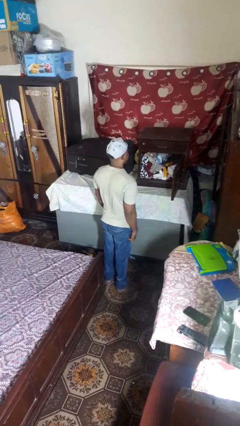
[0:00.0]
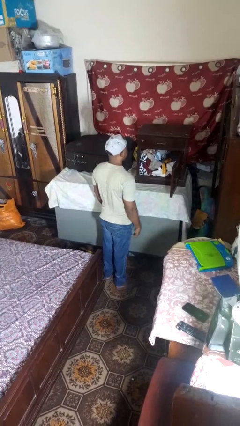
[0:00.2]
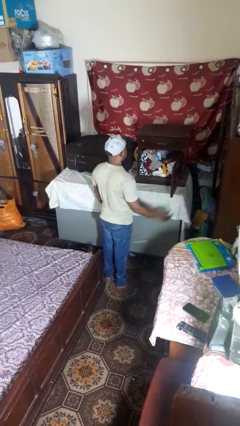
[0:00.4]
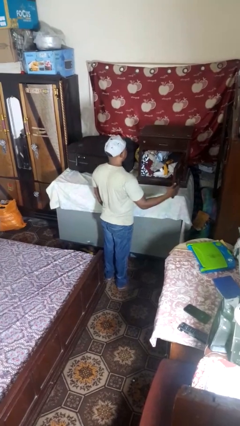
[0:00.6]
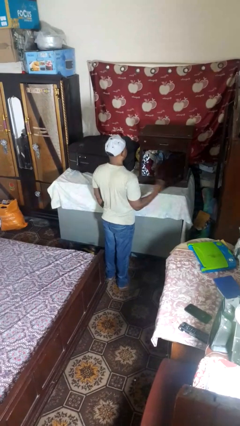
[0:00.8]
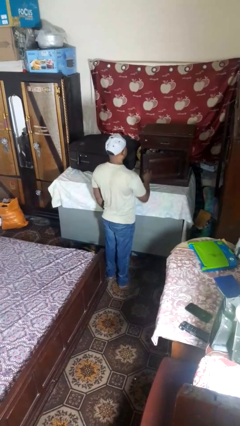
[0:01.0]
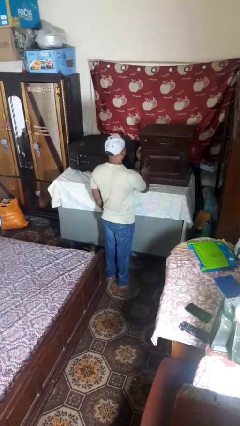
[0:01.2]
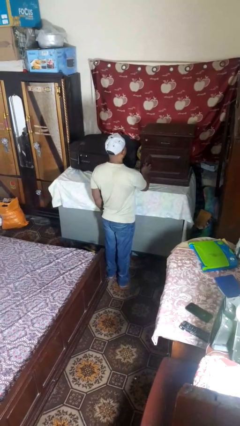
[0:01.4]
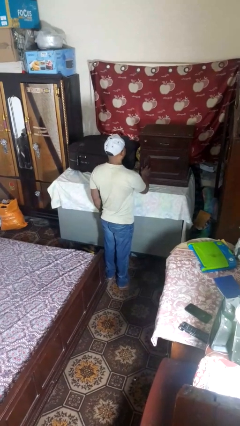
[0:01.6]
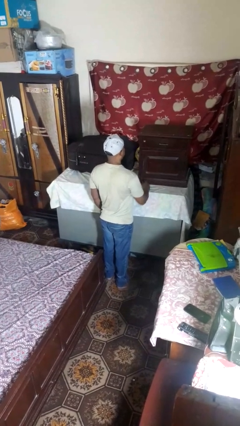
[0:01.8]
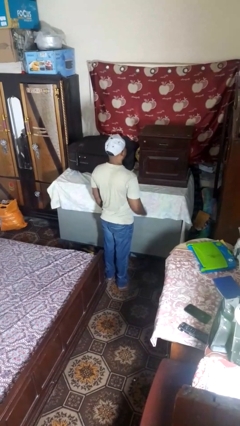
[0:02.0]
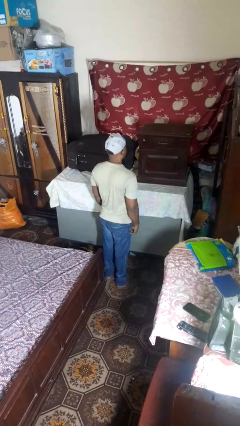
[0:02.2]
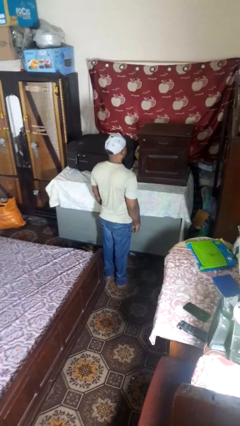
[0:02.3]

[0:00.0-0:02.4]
person closes closet door

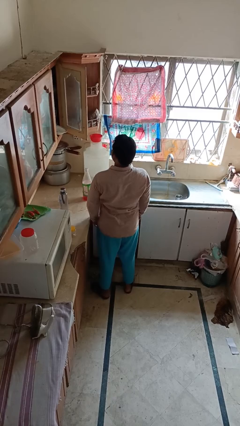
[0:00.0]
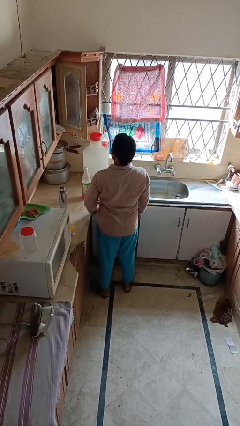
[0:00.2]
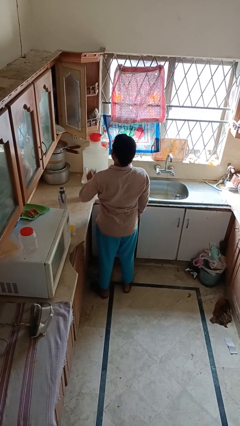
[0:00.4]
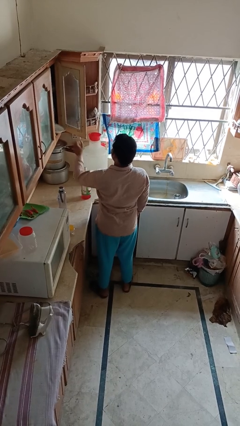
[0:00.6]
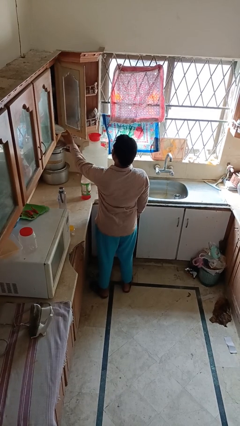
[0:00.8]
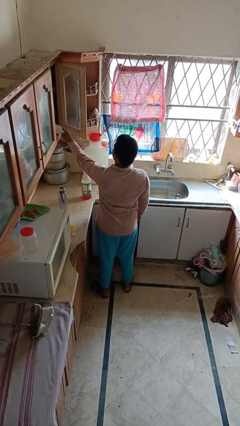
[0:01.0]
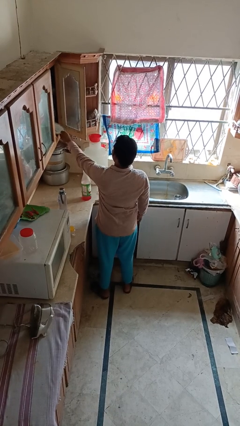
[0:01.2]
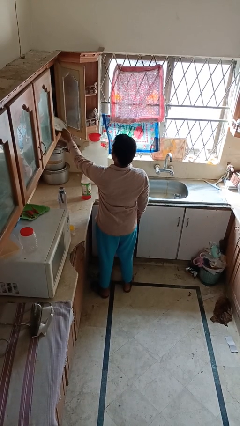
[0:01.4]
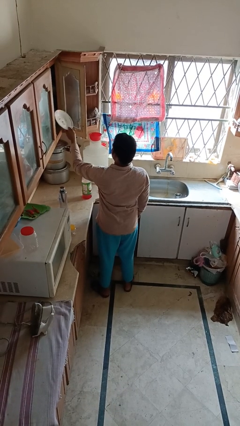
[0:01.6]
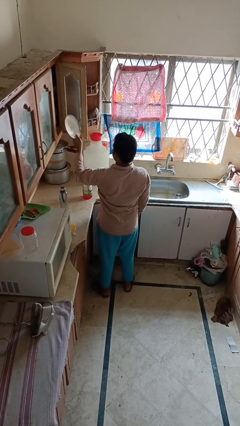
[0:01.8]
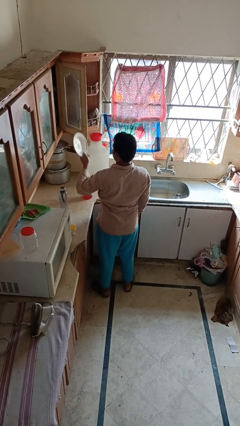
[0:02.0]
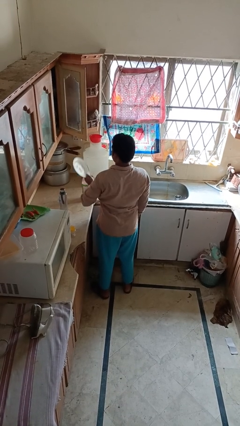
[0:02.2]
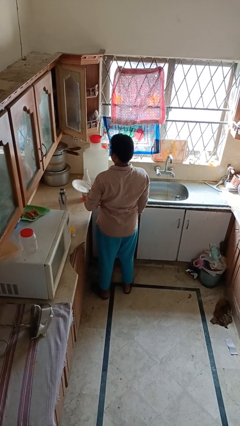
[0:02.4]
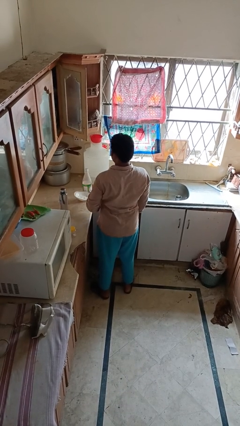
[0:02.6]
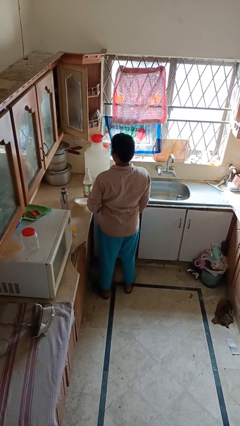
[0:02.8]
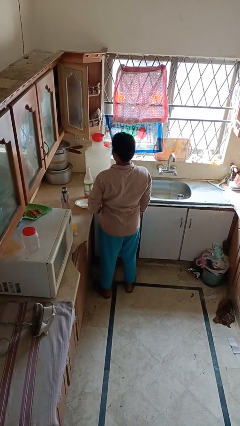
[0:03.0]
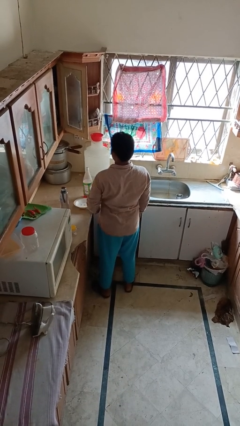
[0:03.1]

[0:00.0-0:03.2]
person takes object from cabinet

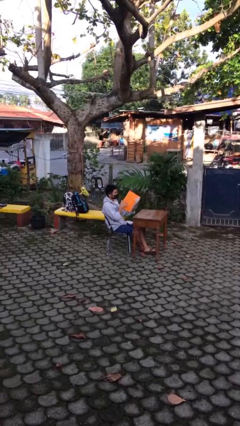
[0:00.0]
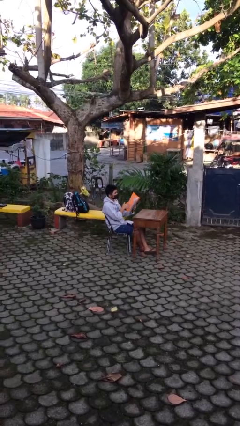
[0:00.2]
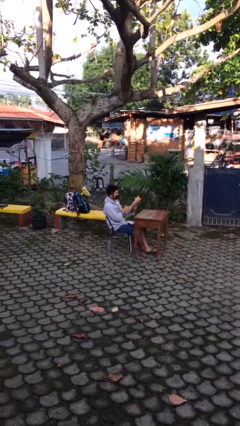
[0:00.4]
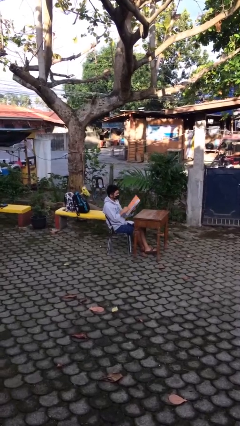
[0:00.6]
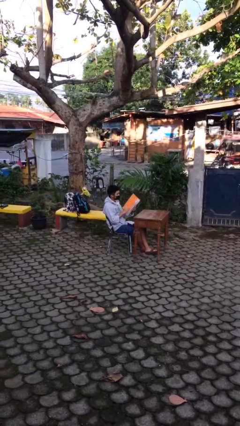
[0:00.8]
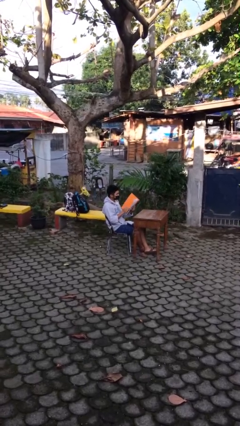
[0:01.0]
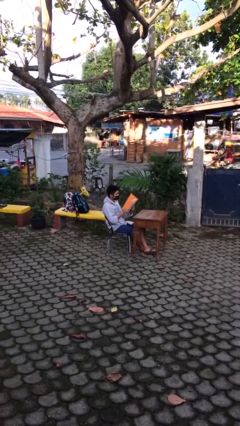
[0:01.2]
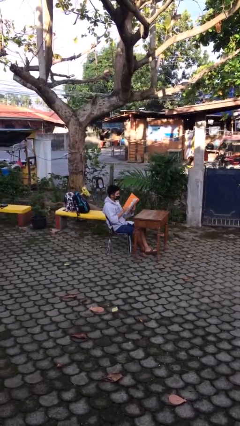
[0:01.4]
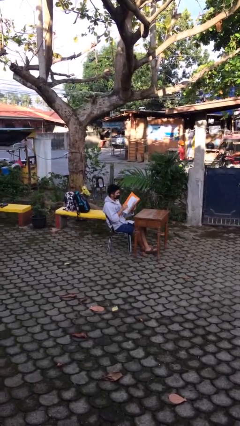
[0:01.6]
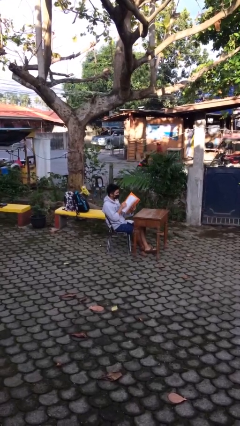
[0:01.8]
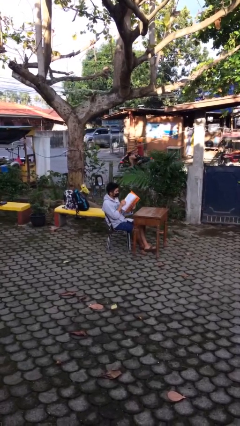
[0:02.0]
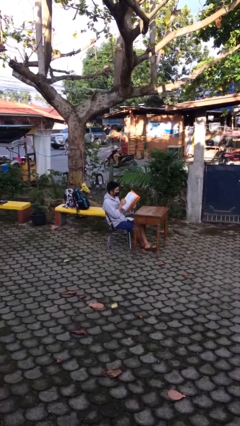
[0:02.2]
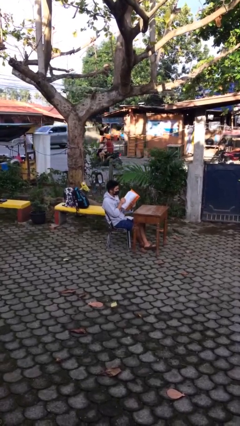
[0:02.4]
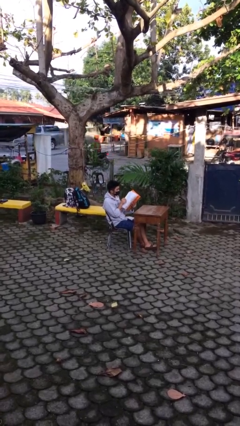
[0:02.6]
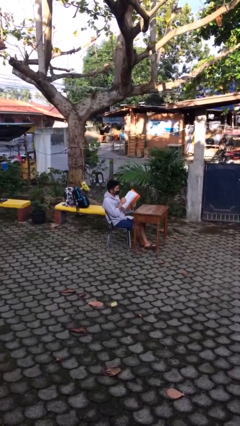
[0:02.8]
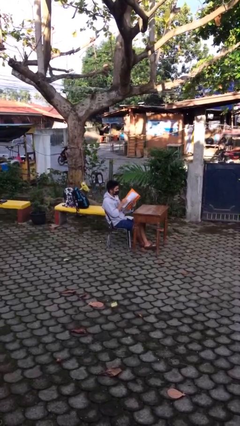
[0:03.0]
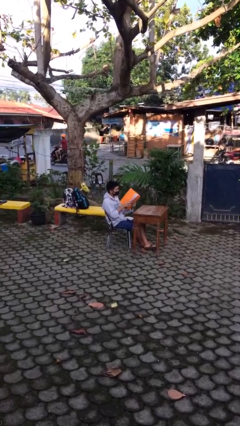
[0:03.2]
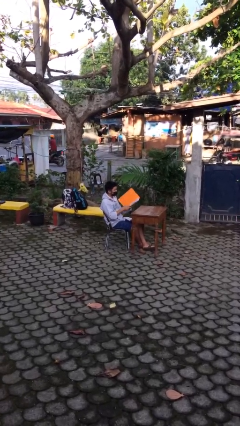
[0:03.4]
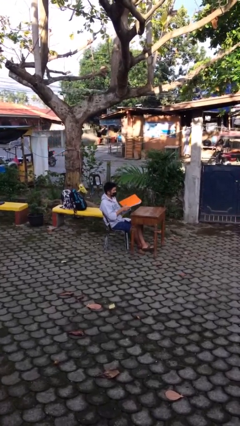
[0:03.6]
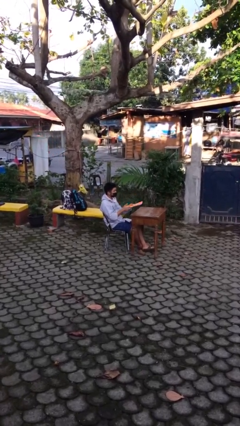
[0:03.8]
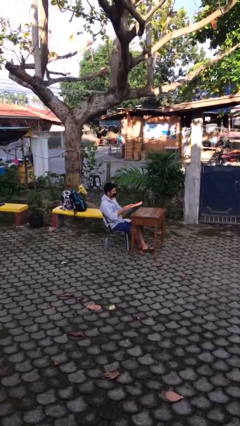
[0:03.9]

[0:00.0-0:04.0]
person reads document

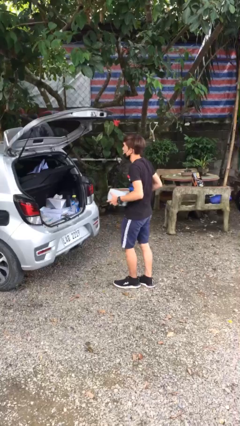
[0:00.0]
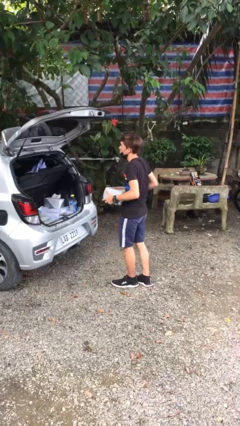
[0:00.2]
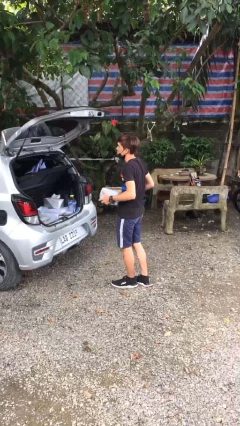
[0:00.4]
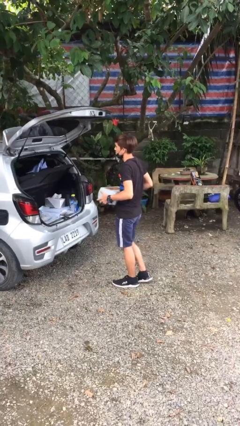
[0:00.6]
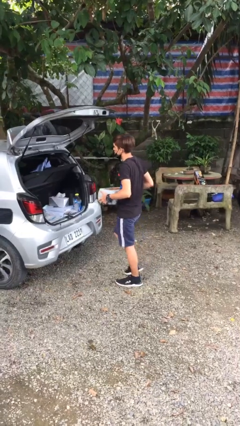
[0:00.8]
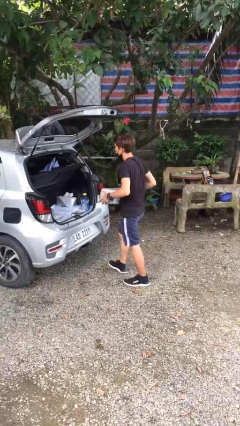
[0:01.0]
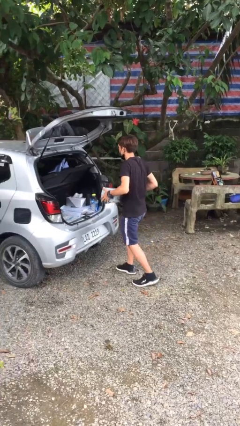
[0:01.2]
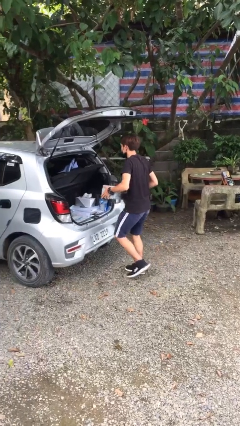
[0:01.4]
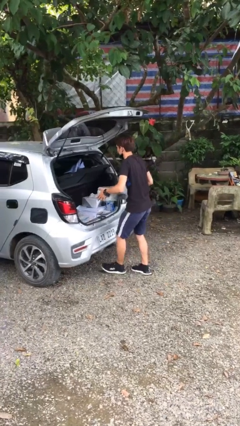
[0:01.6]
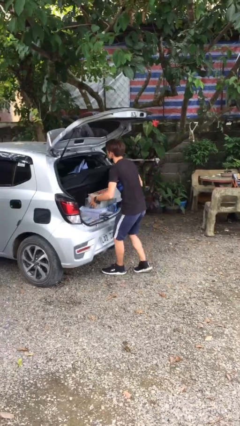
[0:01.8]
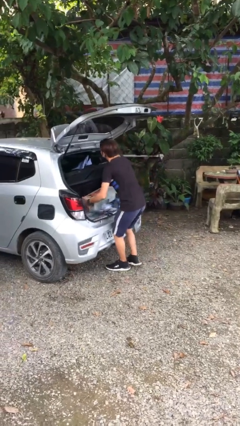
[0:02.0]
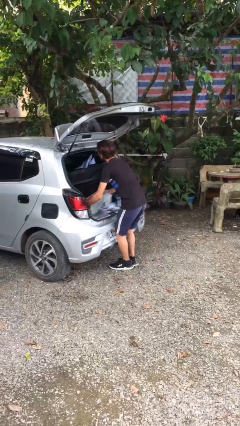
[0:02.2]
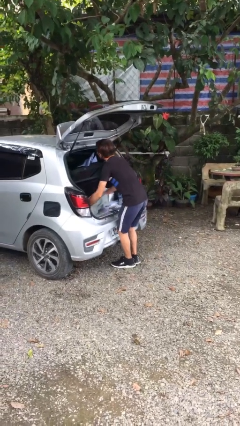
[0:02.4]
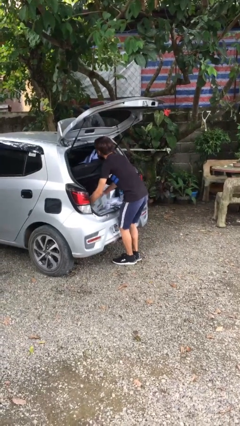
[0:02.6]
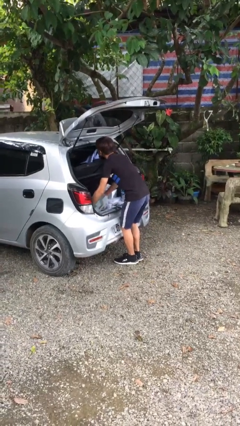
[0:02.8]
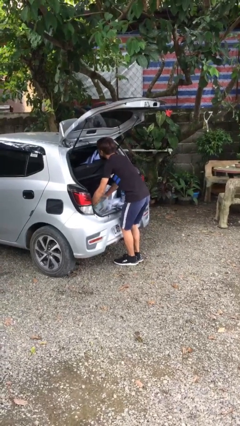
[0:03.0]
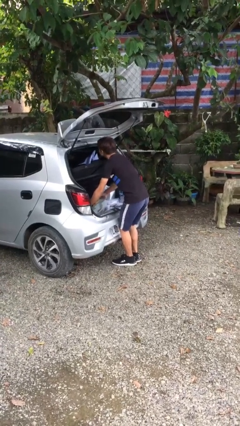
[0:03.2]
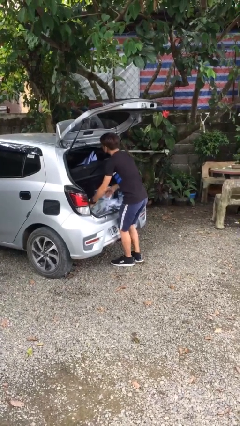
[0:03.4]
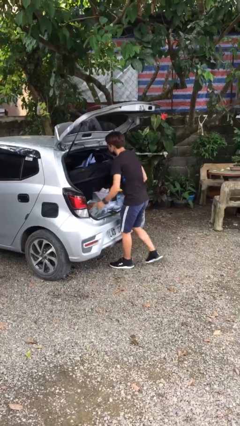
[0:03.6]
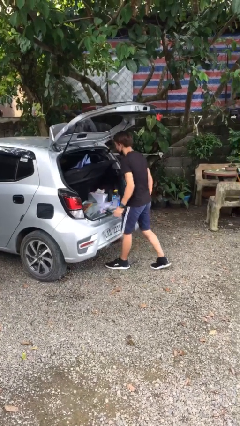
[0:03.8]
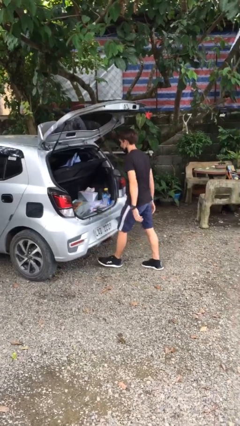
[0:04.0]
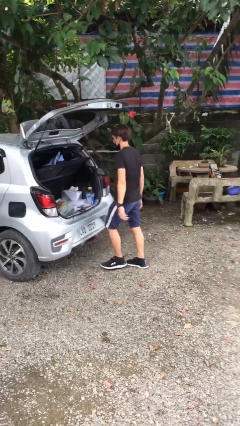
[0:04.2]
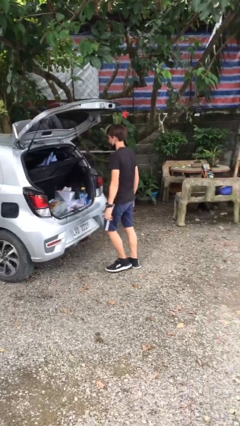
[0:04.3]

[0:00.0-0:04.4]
person loads car

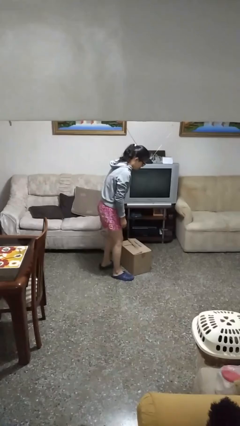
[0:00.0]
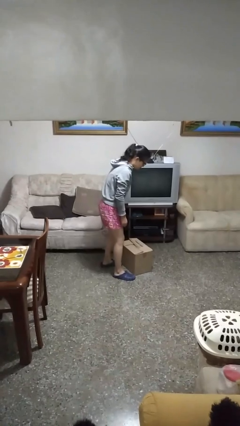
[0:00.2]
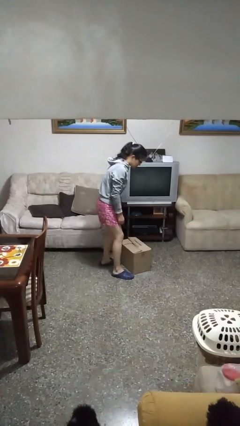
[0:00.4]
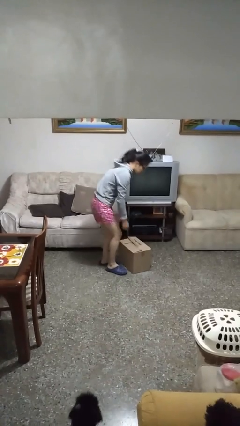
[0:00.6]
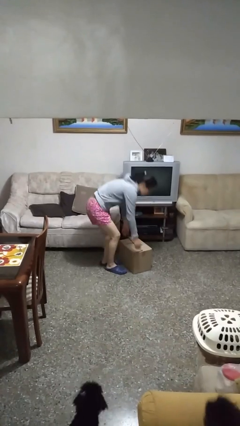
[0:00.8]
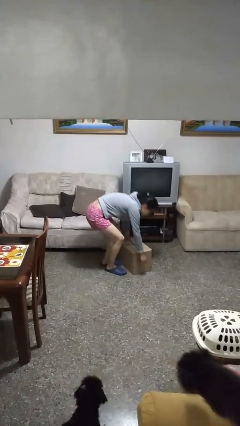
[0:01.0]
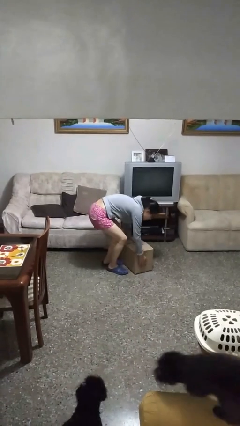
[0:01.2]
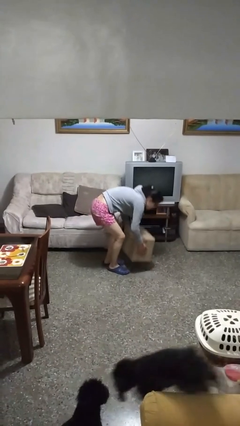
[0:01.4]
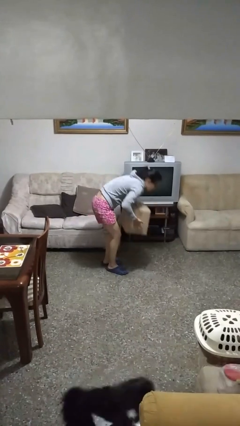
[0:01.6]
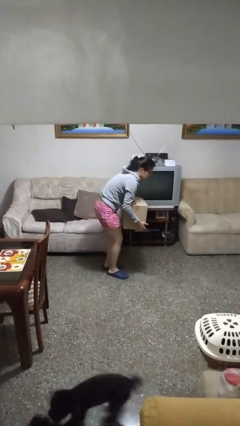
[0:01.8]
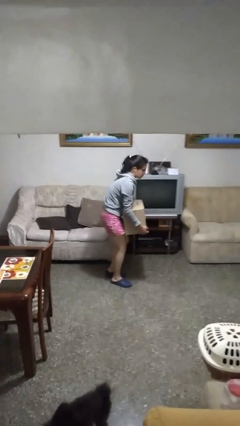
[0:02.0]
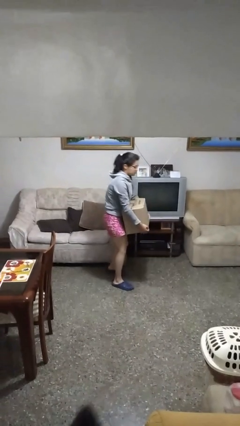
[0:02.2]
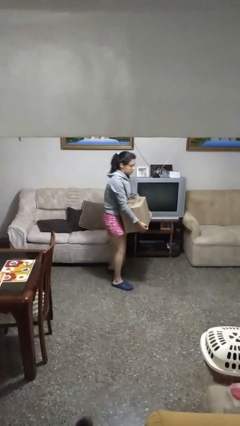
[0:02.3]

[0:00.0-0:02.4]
person picks up object from floor

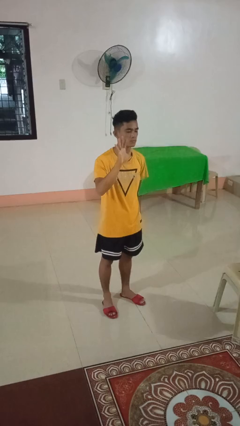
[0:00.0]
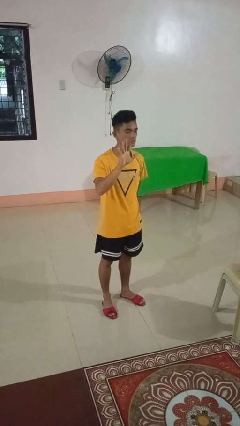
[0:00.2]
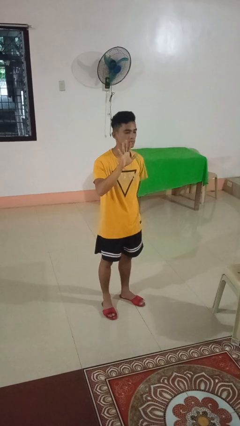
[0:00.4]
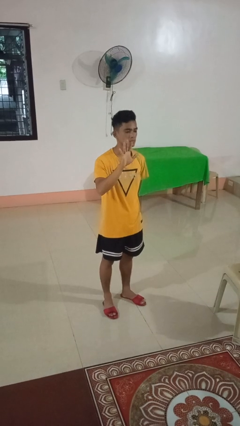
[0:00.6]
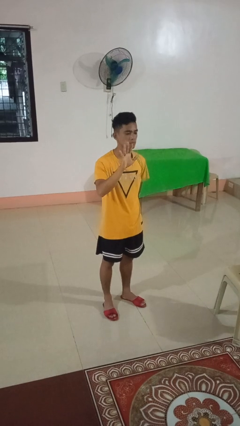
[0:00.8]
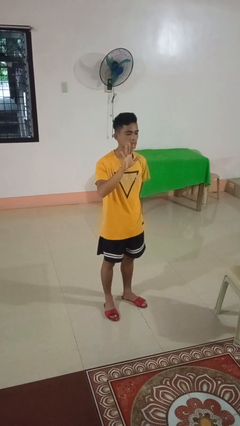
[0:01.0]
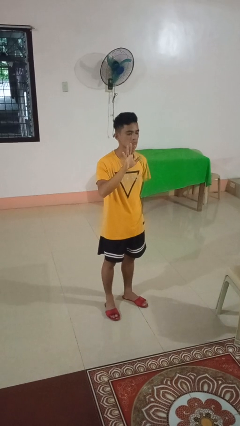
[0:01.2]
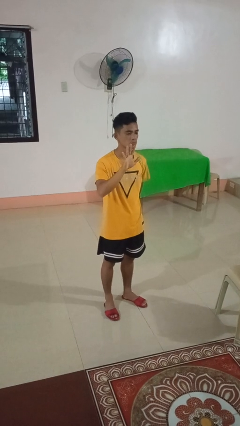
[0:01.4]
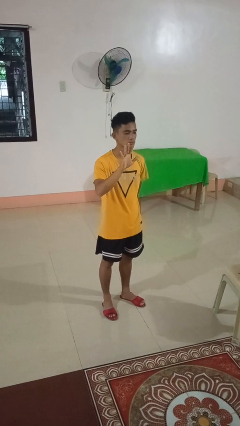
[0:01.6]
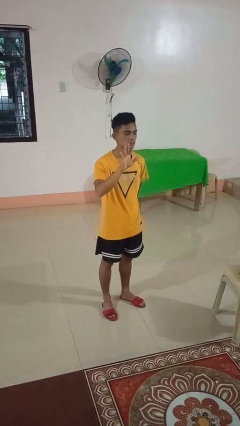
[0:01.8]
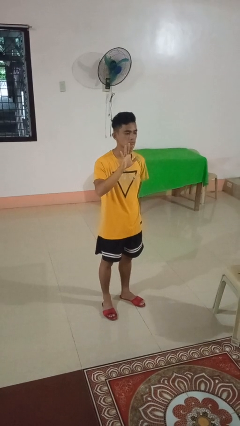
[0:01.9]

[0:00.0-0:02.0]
person gestures number five
